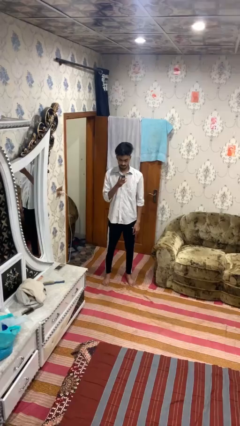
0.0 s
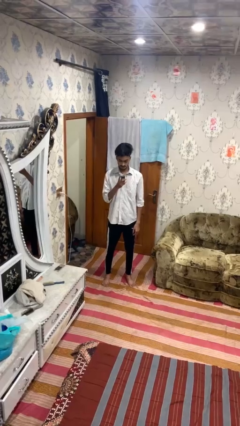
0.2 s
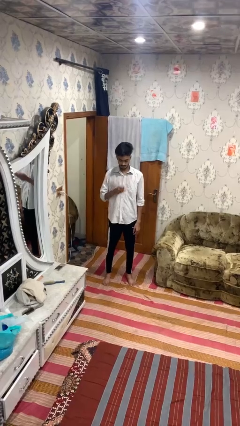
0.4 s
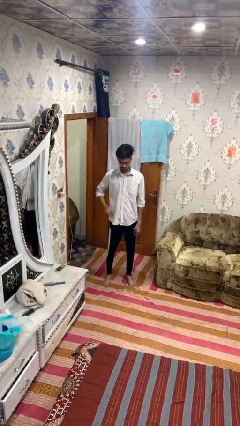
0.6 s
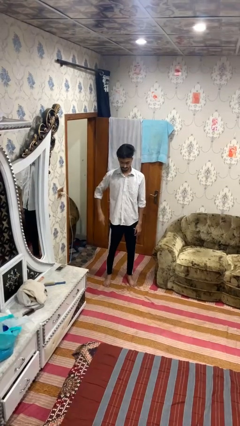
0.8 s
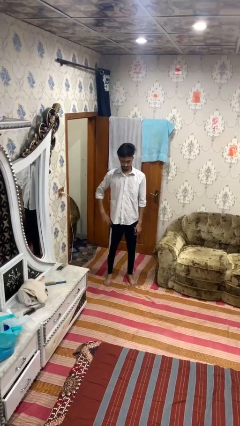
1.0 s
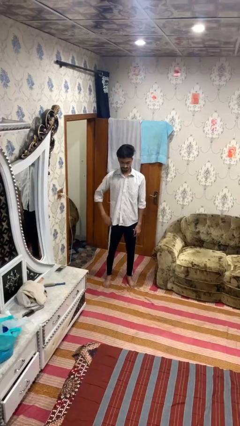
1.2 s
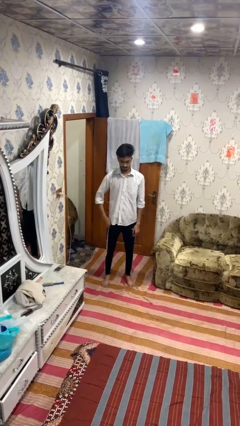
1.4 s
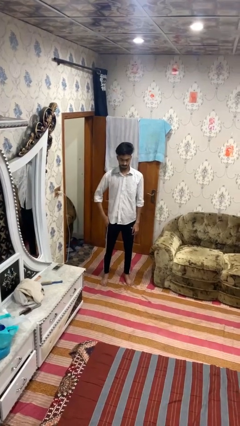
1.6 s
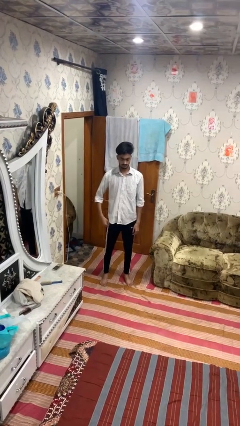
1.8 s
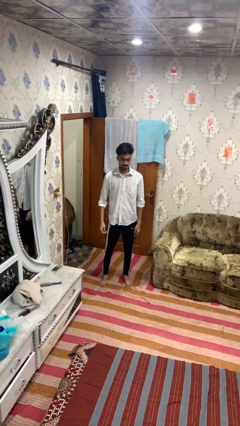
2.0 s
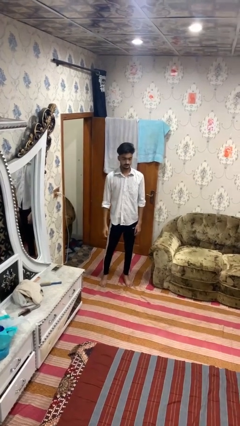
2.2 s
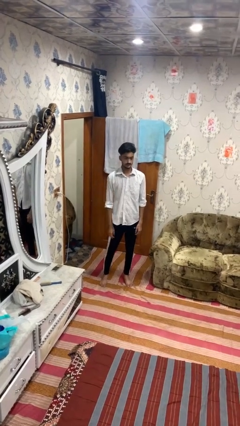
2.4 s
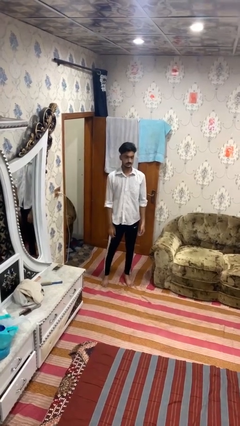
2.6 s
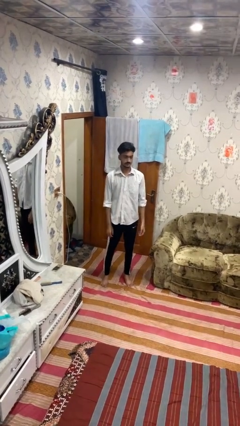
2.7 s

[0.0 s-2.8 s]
person puts phone into pocket

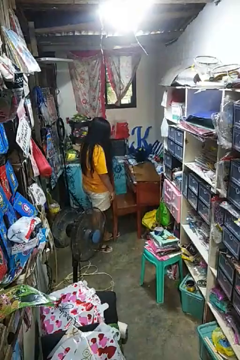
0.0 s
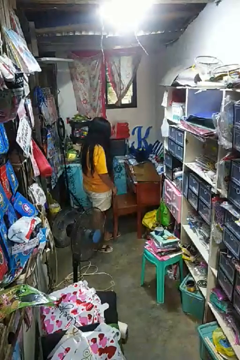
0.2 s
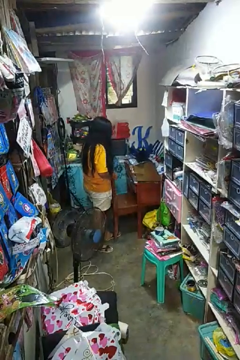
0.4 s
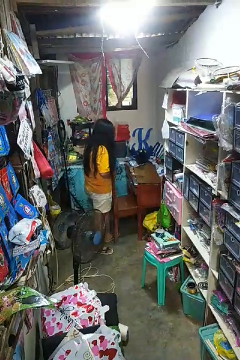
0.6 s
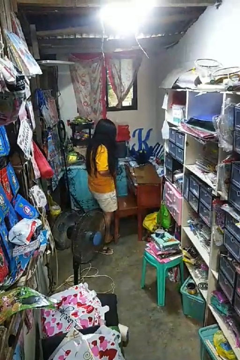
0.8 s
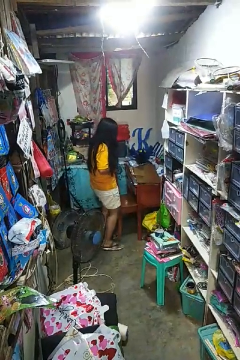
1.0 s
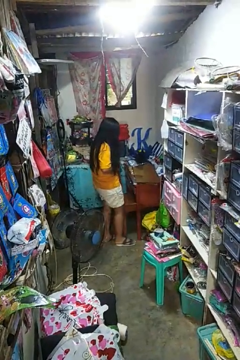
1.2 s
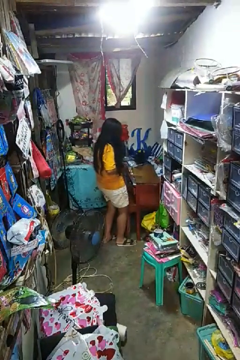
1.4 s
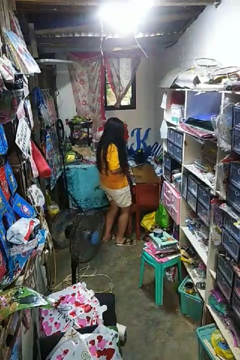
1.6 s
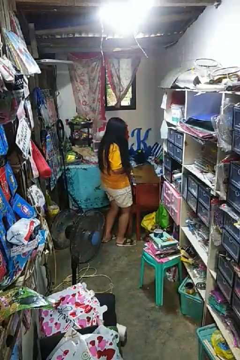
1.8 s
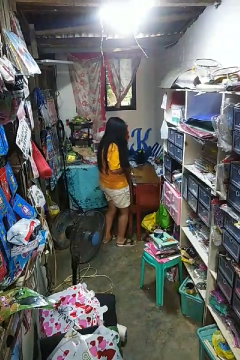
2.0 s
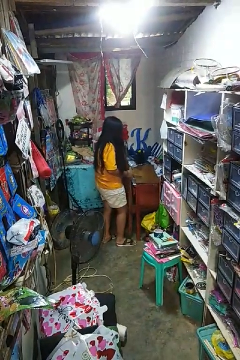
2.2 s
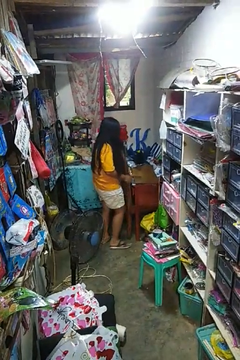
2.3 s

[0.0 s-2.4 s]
person pushes in chair

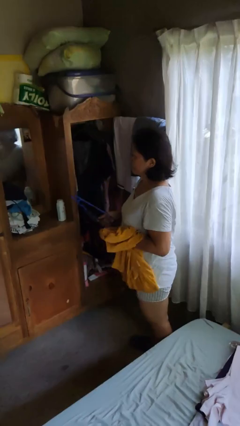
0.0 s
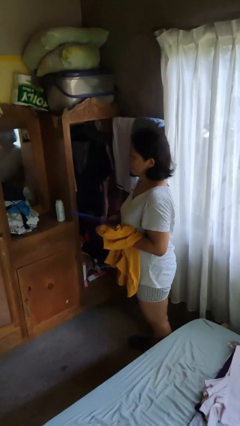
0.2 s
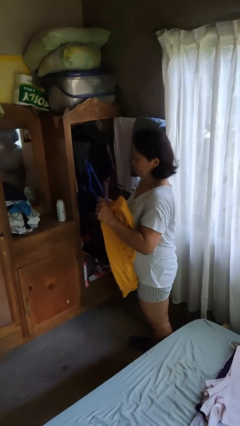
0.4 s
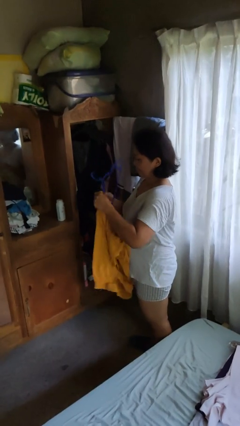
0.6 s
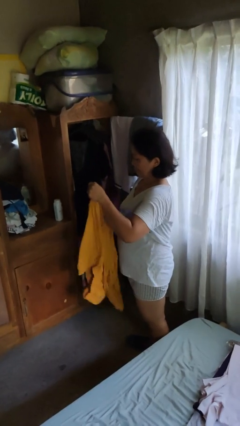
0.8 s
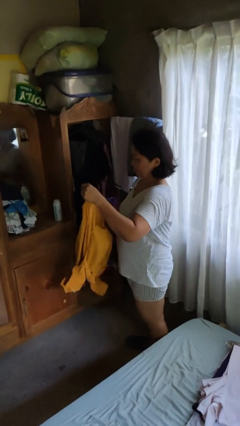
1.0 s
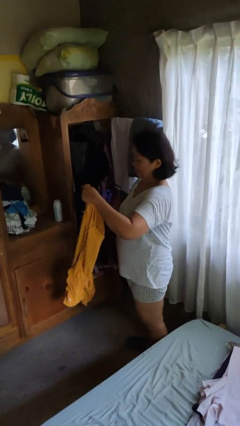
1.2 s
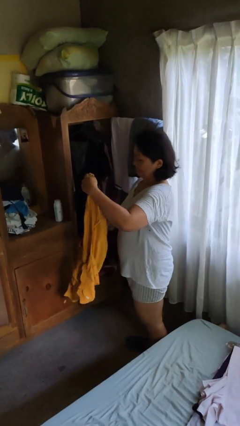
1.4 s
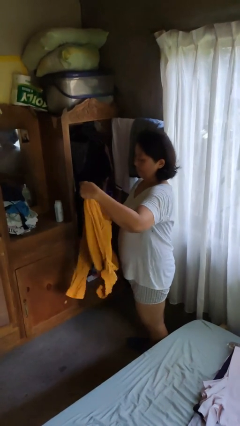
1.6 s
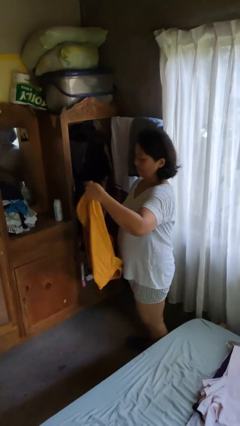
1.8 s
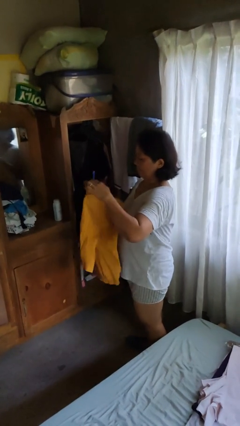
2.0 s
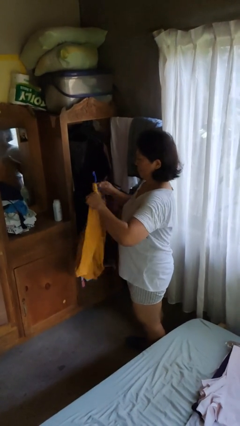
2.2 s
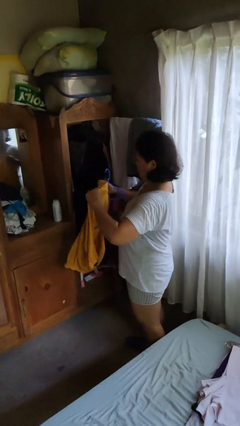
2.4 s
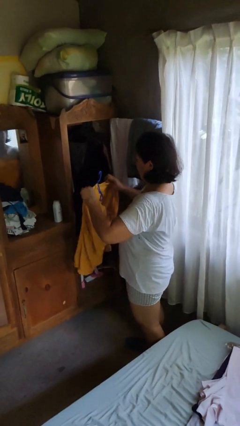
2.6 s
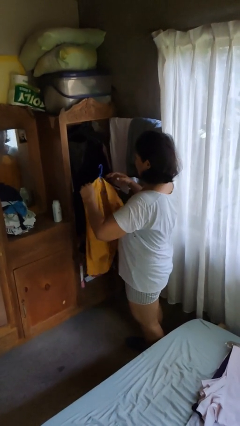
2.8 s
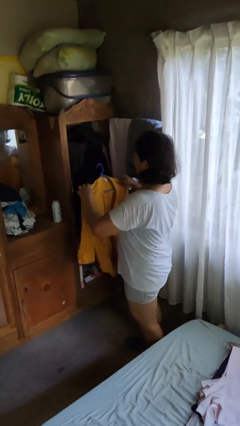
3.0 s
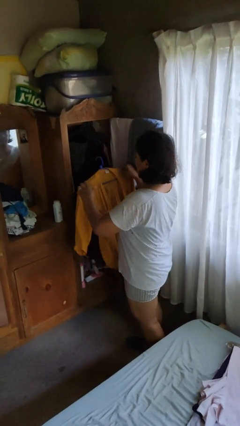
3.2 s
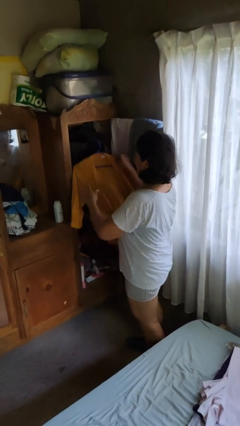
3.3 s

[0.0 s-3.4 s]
person puts clothes into closet

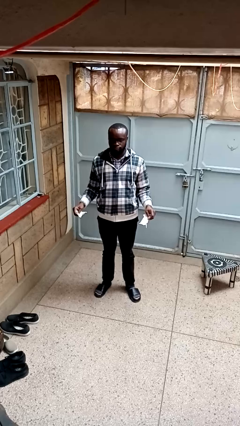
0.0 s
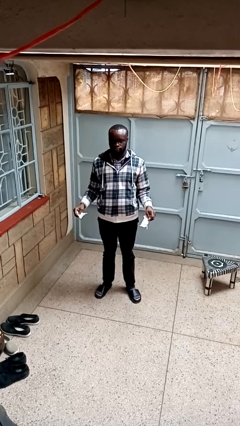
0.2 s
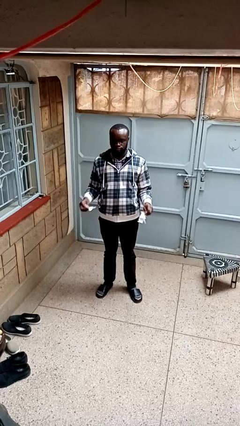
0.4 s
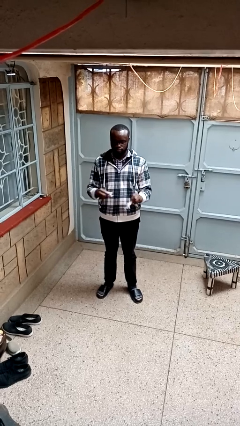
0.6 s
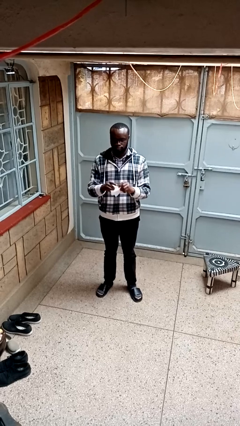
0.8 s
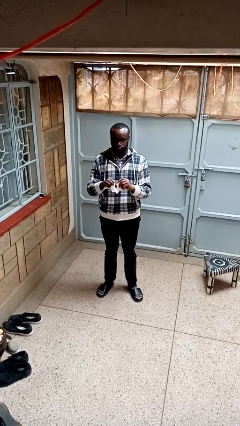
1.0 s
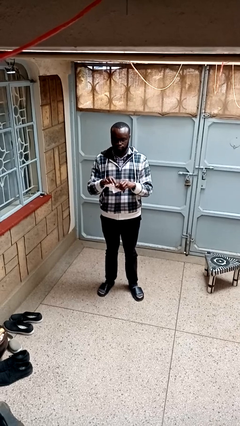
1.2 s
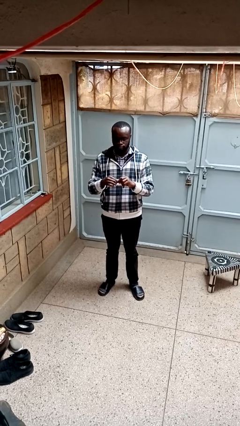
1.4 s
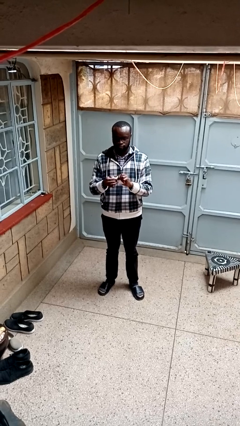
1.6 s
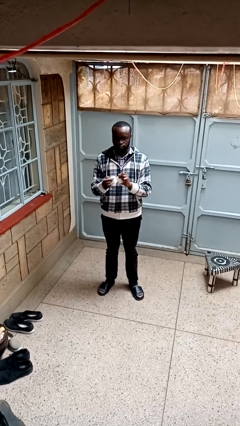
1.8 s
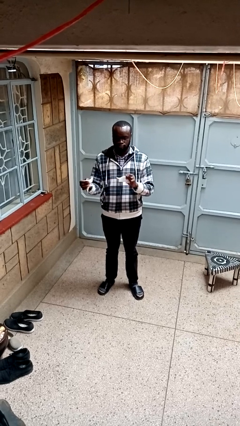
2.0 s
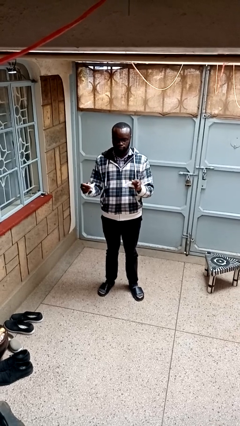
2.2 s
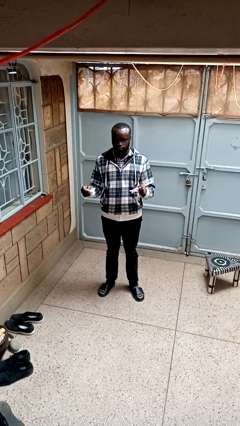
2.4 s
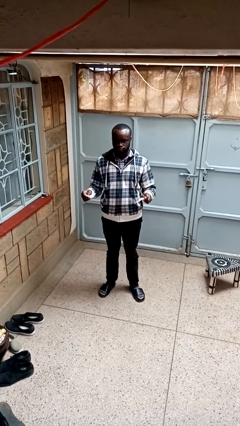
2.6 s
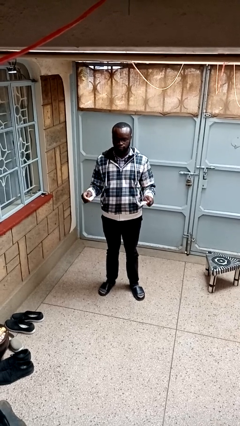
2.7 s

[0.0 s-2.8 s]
person tears paper

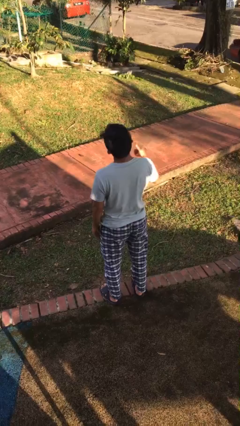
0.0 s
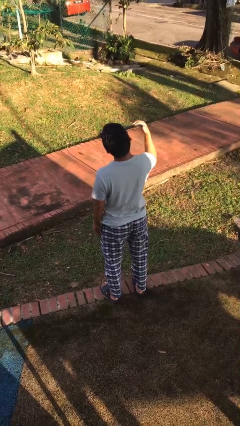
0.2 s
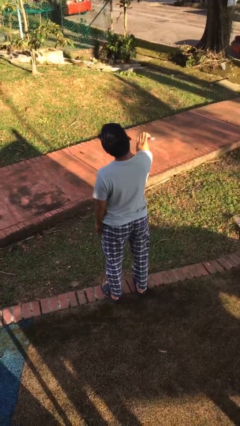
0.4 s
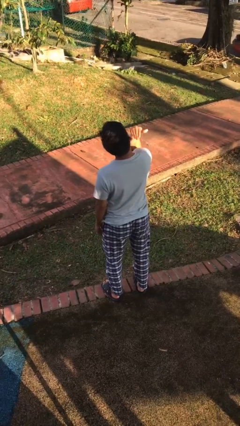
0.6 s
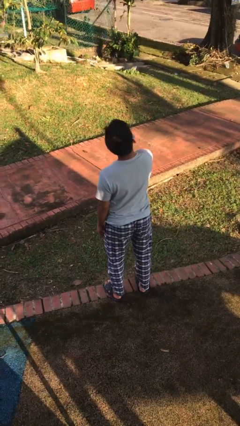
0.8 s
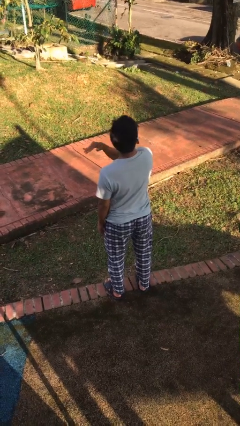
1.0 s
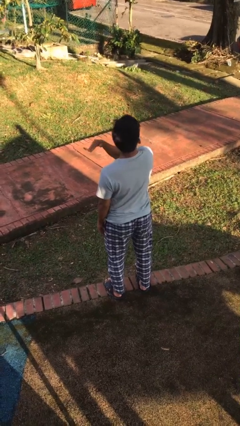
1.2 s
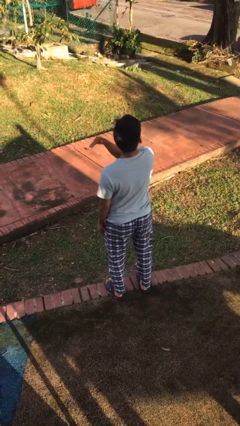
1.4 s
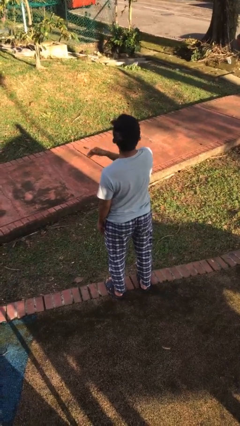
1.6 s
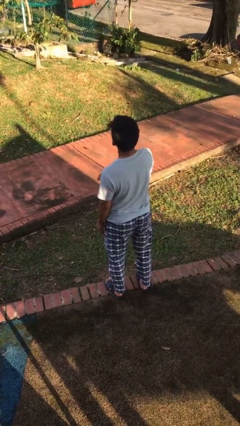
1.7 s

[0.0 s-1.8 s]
person gestures cut

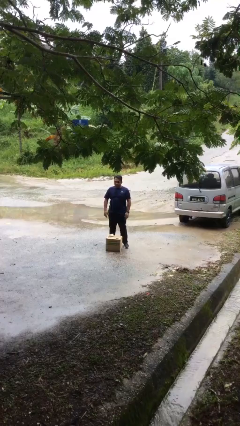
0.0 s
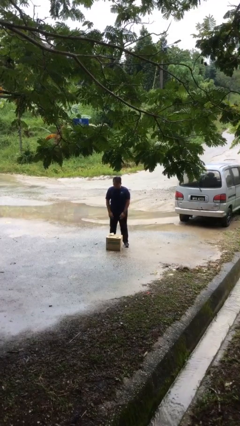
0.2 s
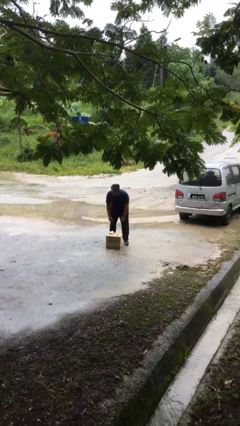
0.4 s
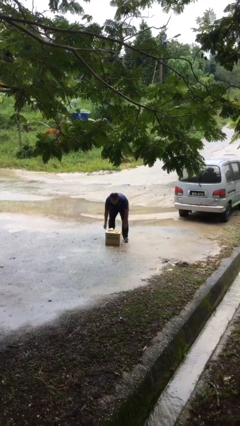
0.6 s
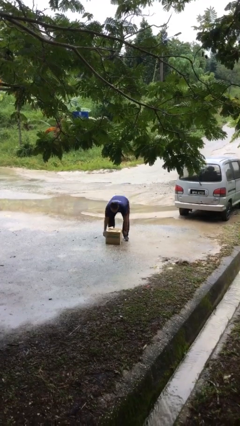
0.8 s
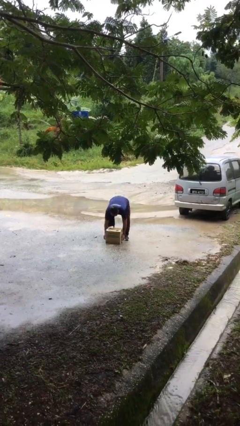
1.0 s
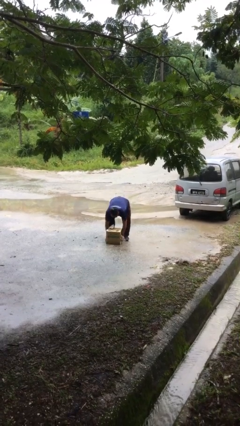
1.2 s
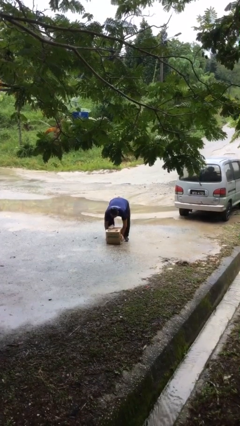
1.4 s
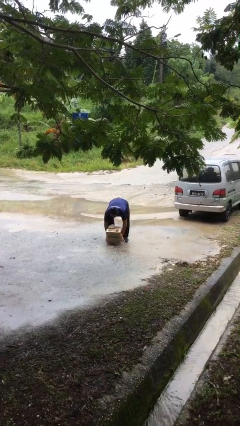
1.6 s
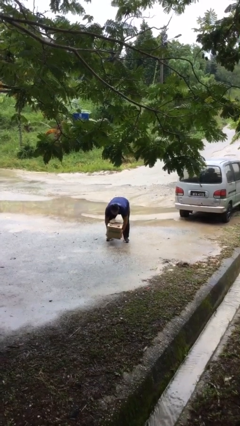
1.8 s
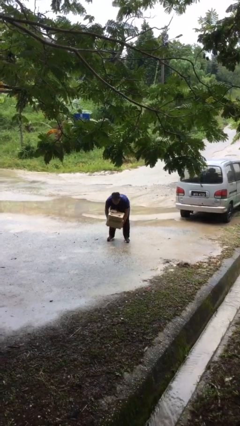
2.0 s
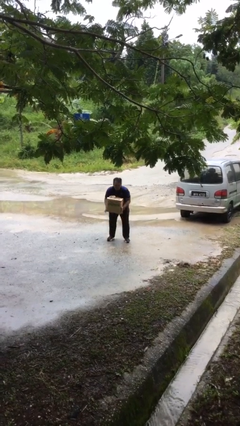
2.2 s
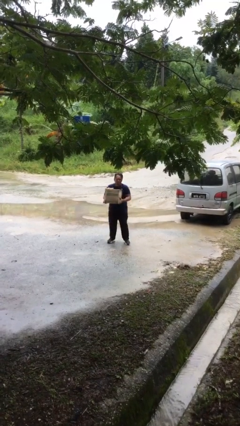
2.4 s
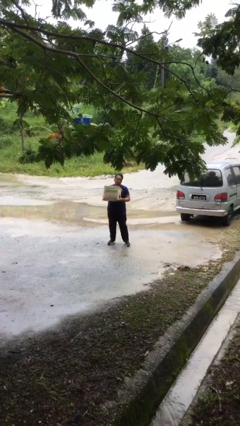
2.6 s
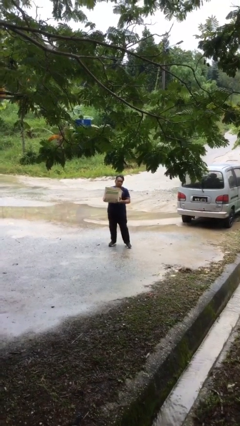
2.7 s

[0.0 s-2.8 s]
person picks up object from floor

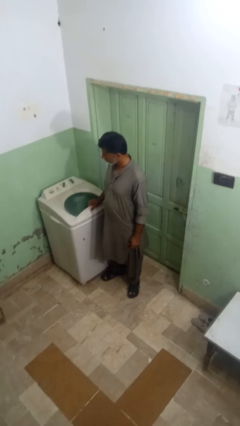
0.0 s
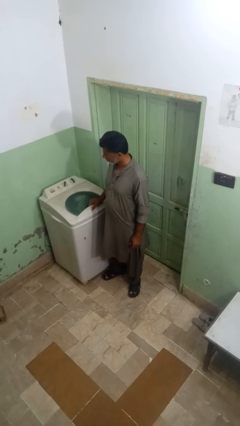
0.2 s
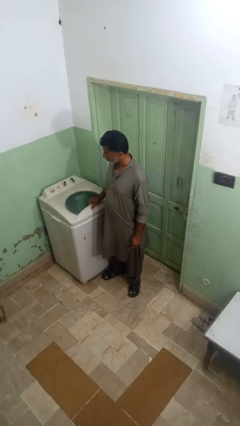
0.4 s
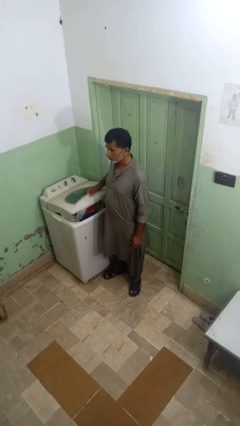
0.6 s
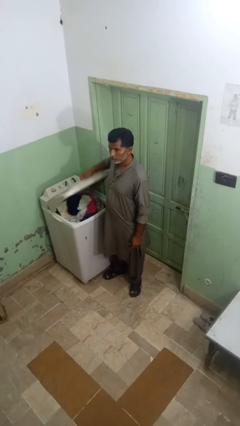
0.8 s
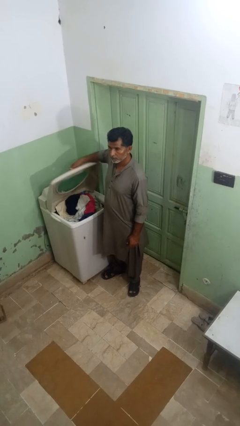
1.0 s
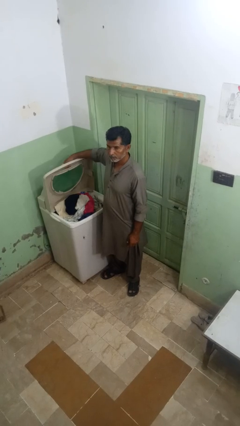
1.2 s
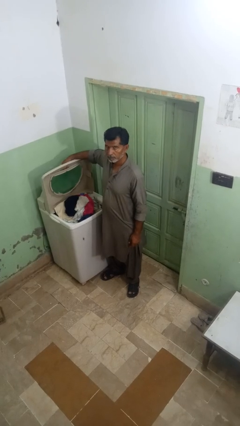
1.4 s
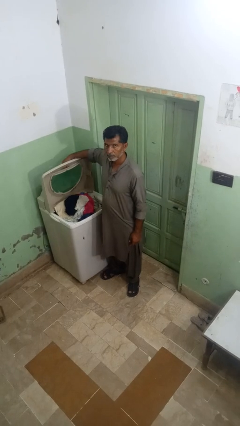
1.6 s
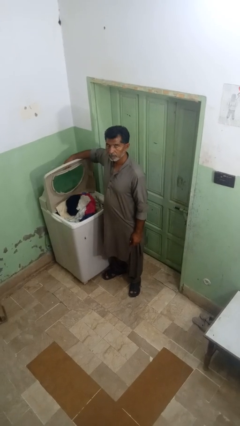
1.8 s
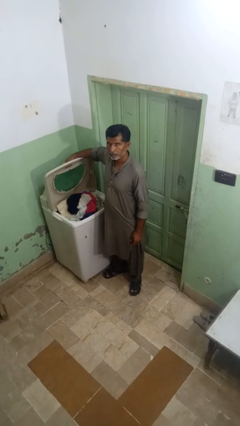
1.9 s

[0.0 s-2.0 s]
person opens clothes washer
